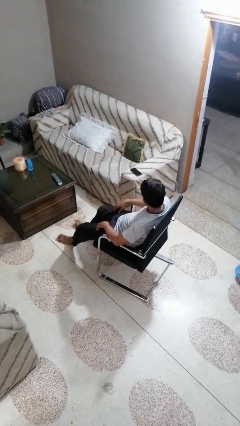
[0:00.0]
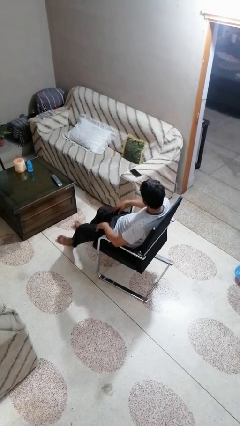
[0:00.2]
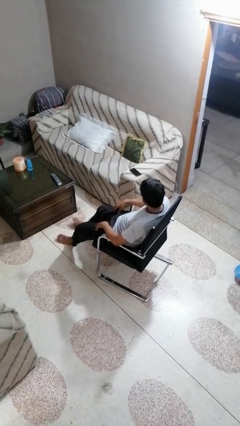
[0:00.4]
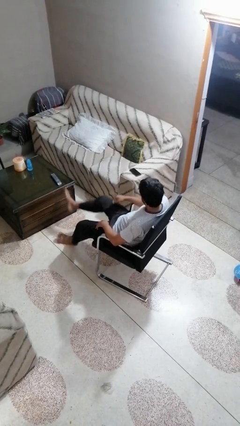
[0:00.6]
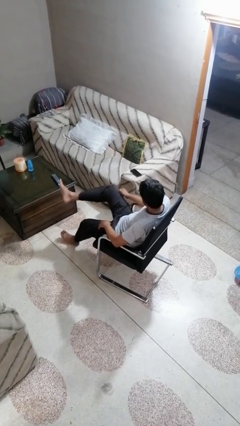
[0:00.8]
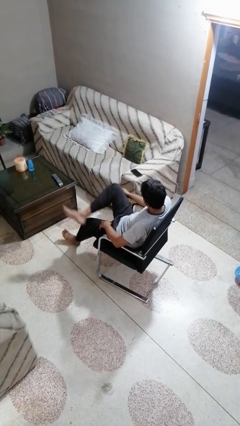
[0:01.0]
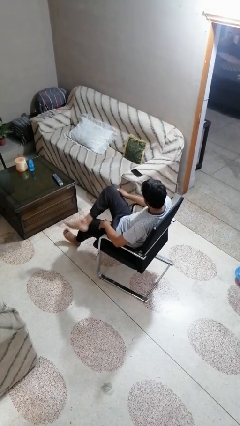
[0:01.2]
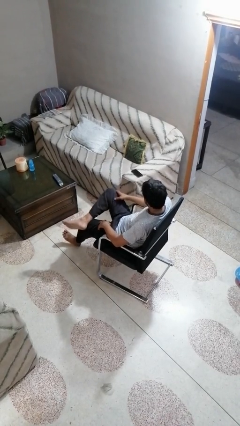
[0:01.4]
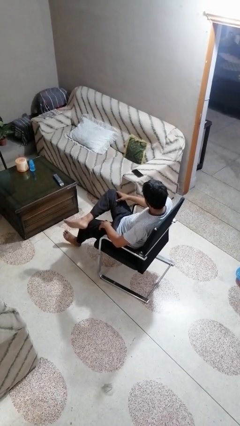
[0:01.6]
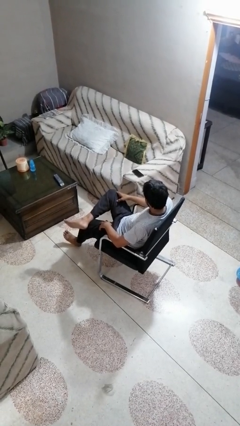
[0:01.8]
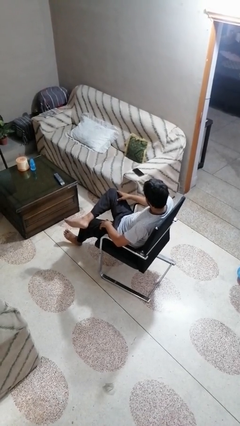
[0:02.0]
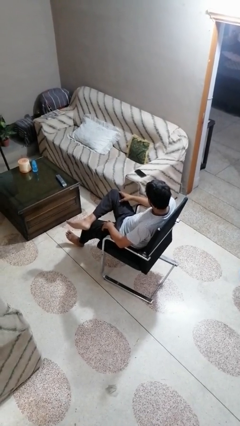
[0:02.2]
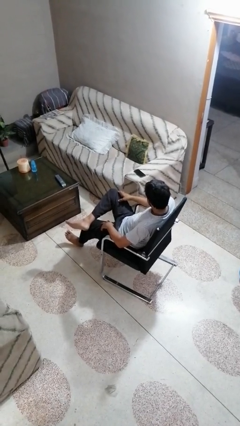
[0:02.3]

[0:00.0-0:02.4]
person crosses legs

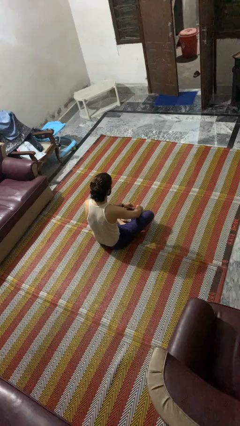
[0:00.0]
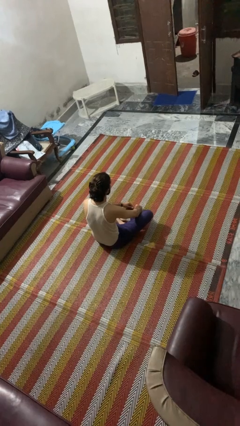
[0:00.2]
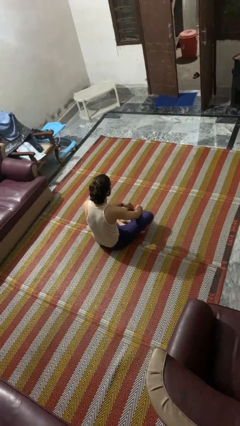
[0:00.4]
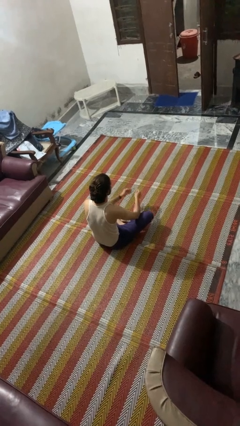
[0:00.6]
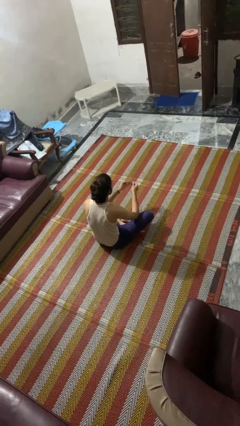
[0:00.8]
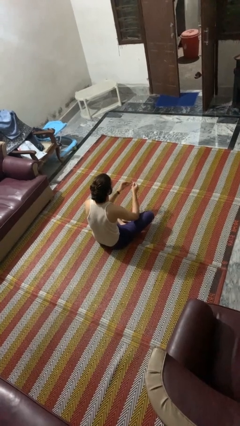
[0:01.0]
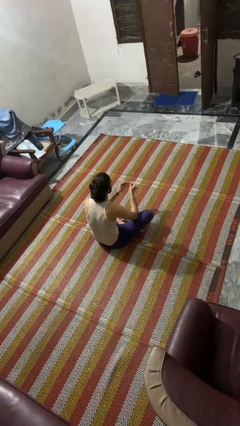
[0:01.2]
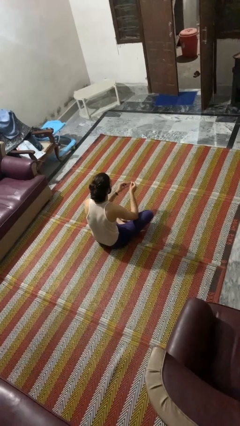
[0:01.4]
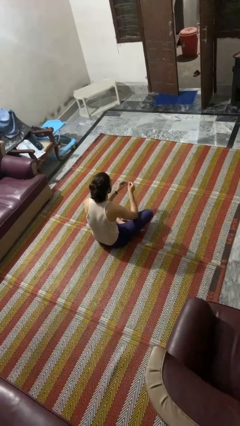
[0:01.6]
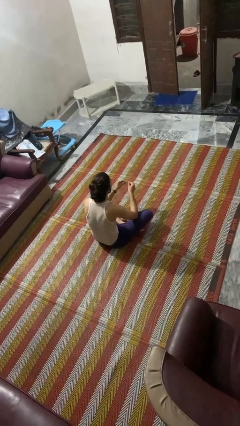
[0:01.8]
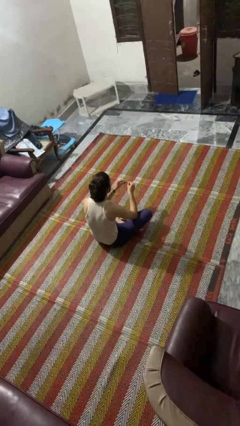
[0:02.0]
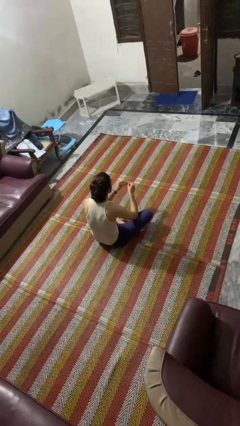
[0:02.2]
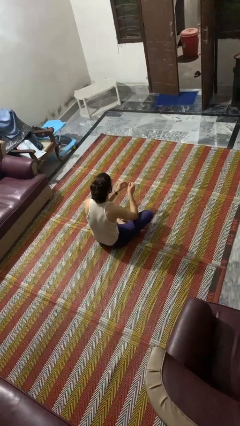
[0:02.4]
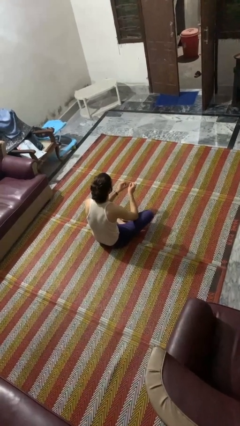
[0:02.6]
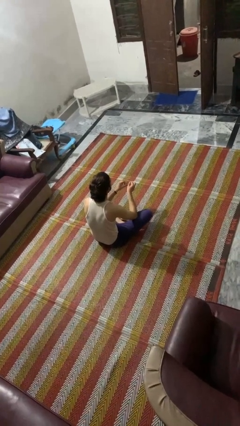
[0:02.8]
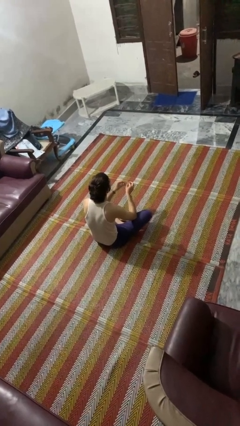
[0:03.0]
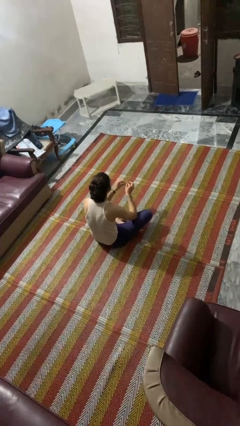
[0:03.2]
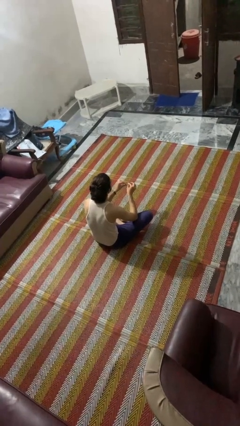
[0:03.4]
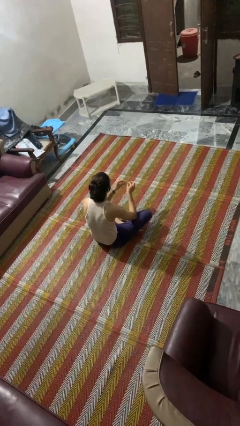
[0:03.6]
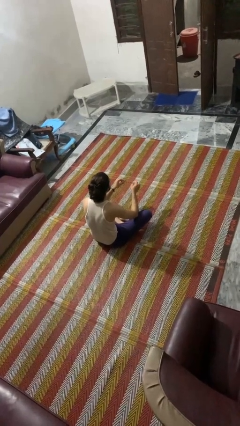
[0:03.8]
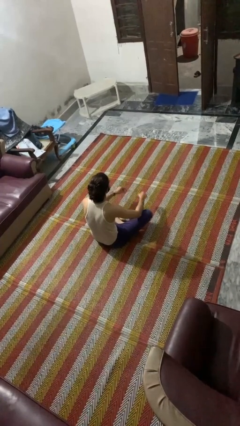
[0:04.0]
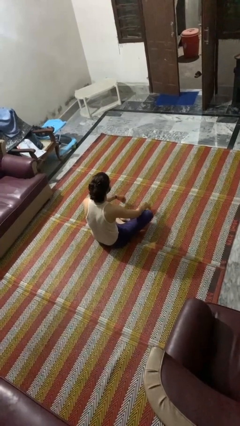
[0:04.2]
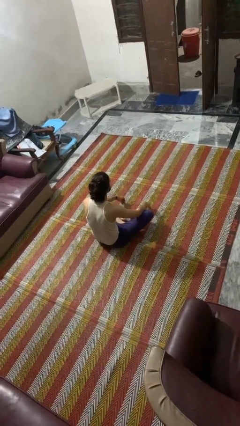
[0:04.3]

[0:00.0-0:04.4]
person files fingernails

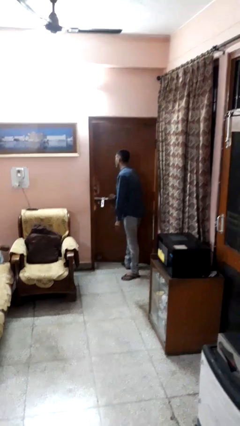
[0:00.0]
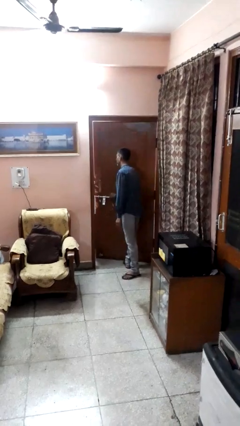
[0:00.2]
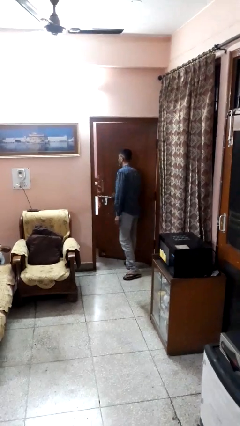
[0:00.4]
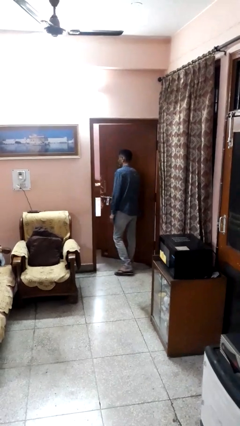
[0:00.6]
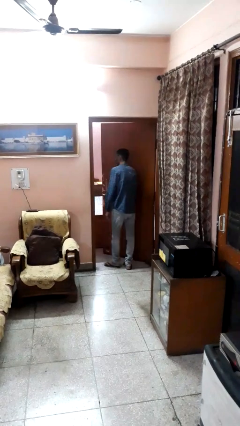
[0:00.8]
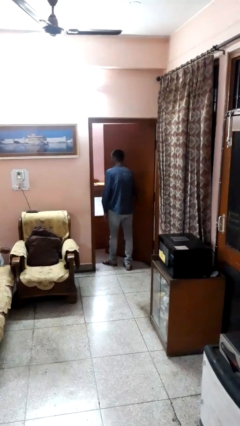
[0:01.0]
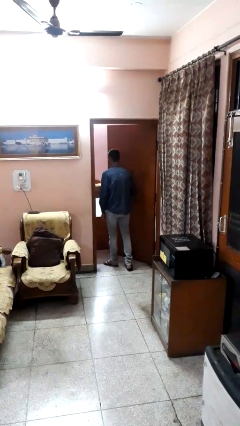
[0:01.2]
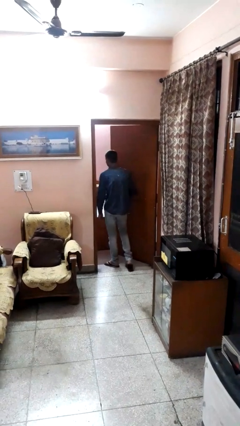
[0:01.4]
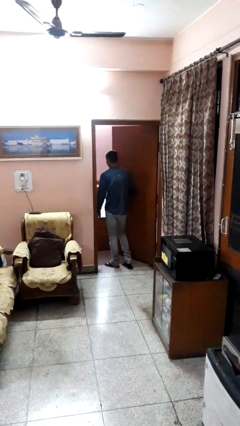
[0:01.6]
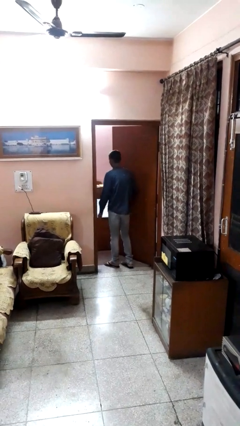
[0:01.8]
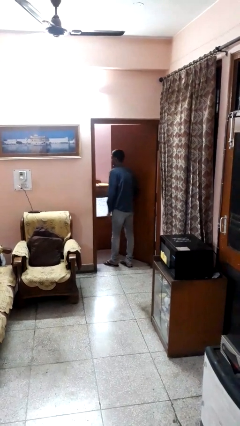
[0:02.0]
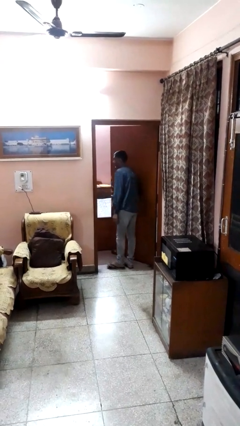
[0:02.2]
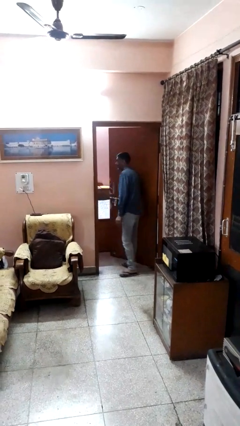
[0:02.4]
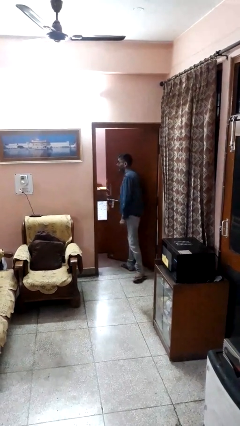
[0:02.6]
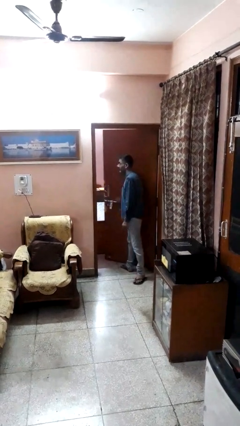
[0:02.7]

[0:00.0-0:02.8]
person opens facility door

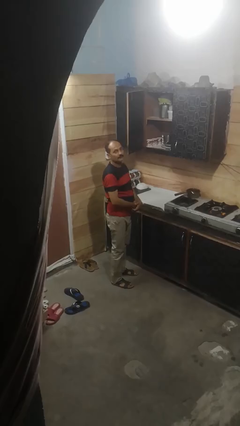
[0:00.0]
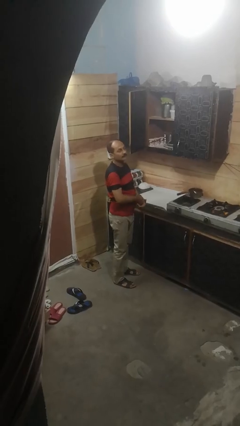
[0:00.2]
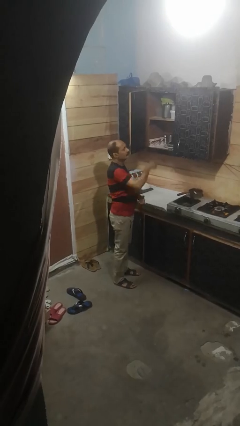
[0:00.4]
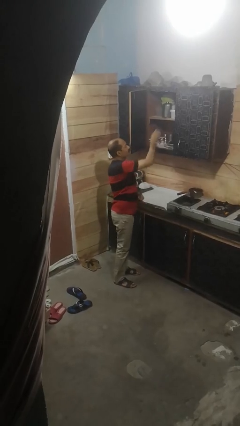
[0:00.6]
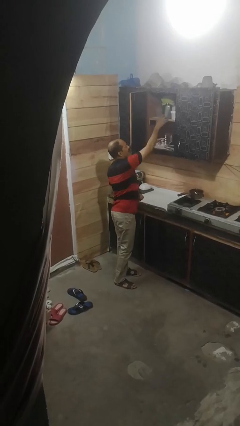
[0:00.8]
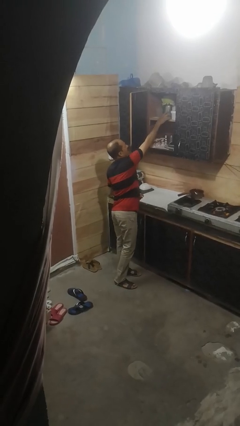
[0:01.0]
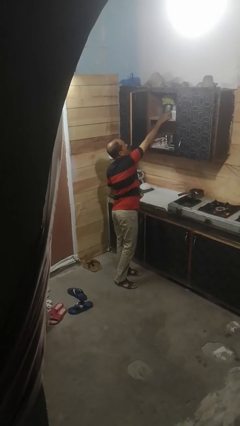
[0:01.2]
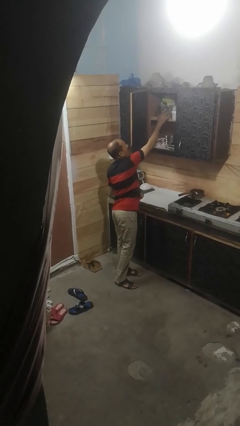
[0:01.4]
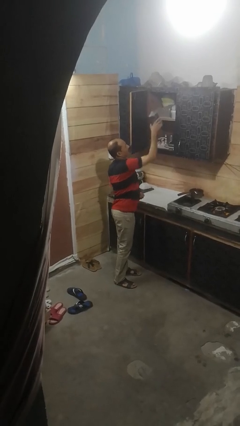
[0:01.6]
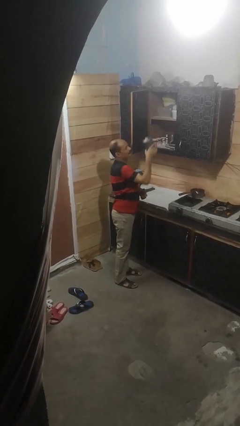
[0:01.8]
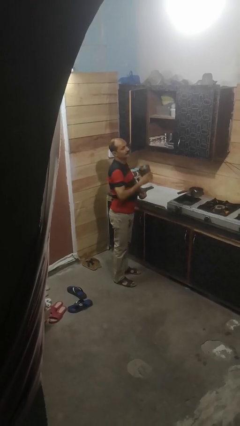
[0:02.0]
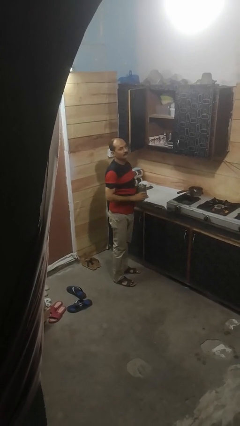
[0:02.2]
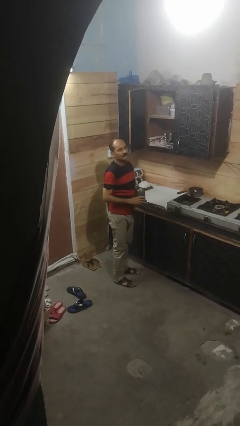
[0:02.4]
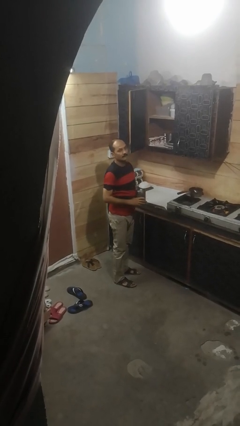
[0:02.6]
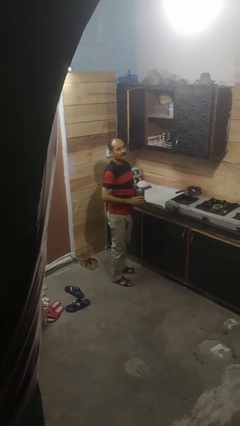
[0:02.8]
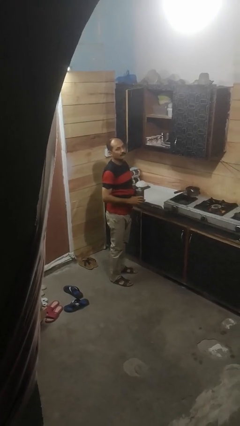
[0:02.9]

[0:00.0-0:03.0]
person picks up object from cabinet

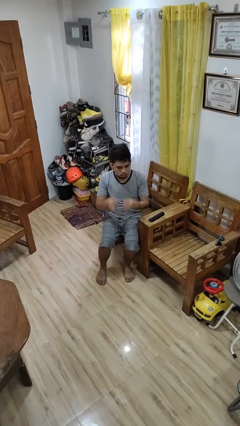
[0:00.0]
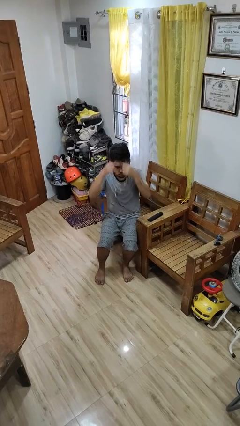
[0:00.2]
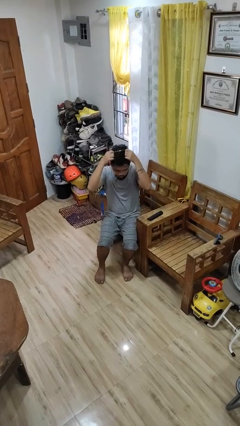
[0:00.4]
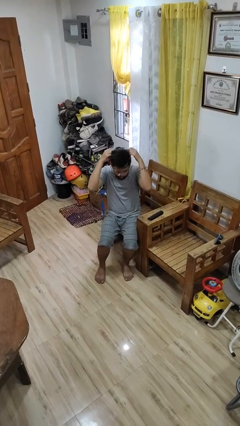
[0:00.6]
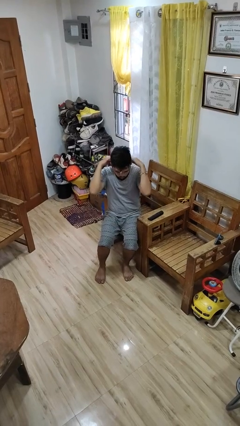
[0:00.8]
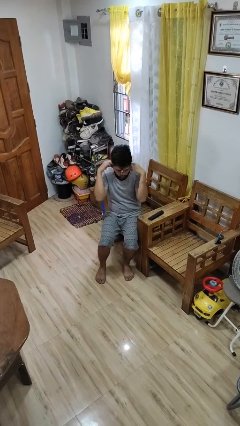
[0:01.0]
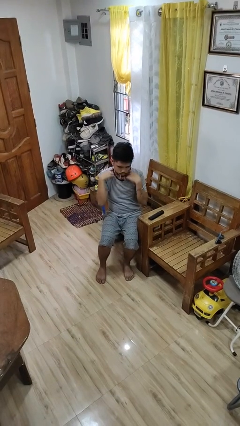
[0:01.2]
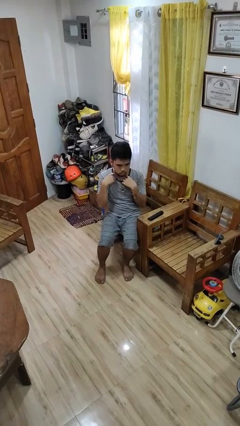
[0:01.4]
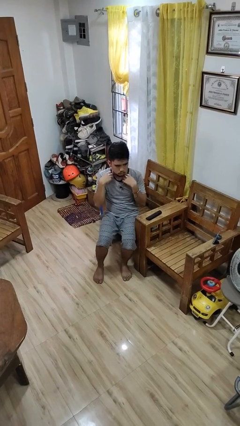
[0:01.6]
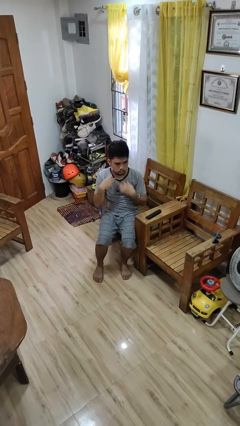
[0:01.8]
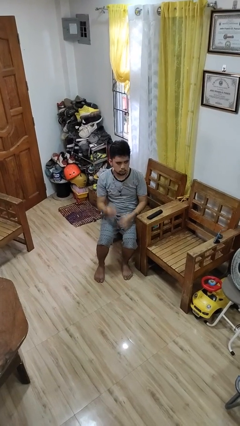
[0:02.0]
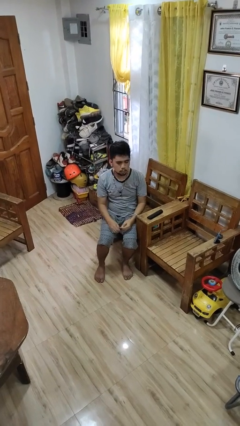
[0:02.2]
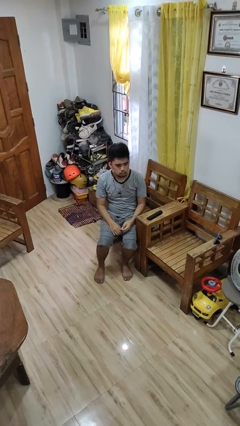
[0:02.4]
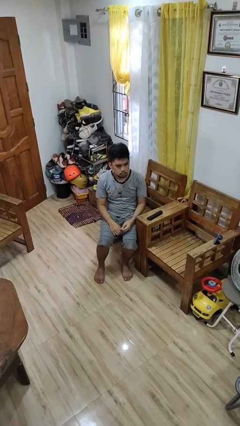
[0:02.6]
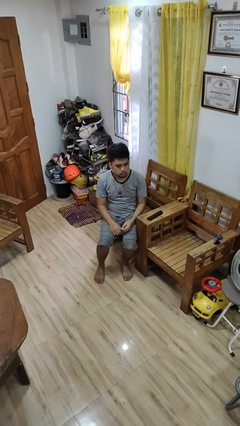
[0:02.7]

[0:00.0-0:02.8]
person puts on necklace

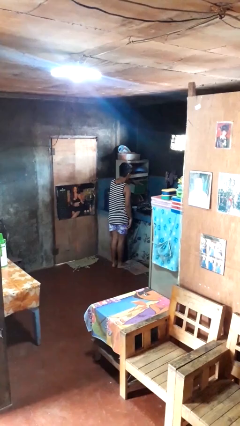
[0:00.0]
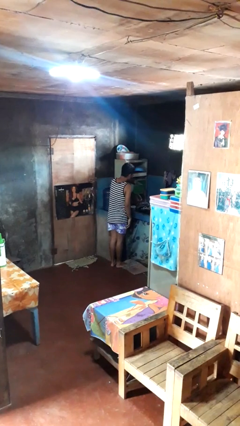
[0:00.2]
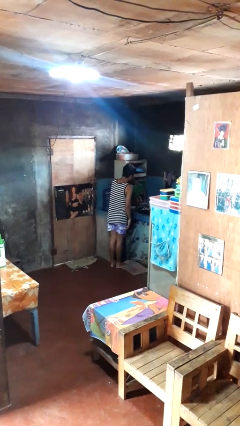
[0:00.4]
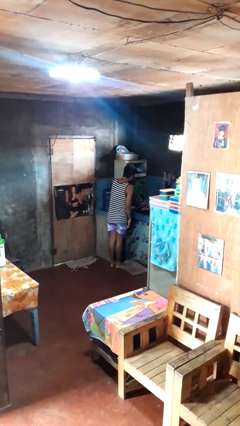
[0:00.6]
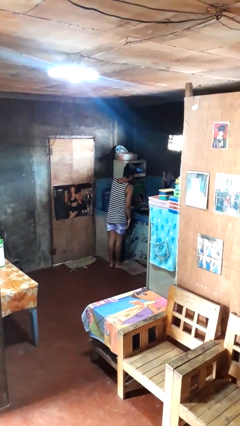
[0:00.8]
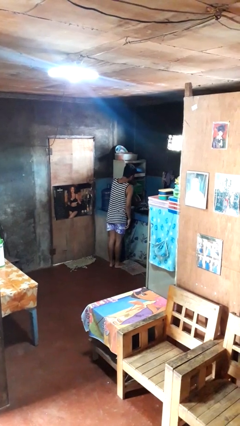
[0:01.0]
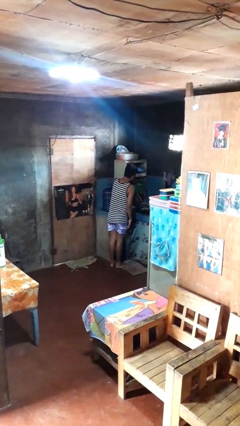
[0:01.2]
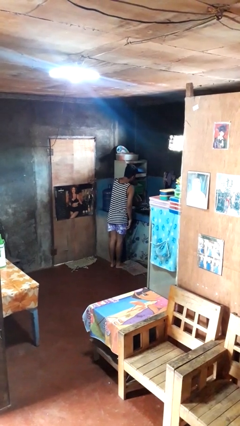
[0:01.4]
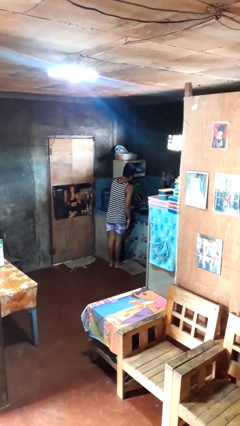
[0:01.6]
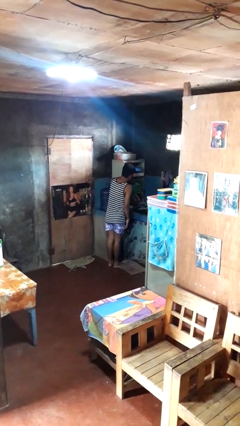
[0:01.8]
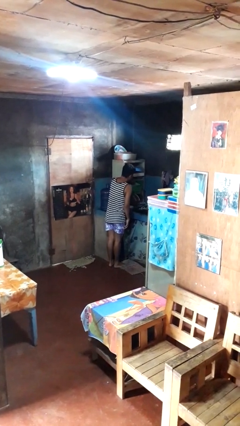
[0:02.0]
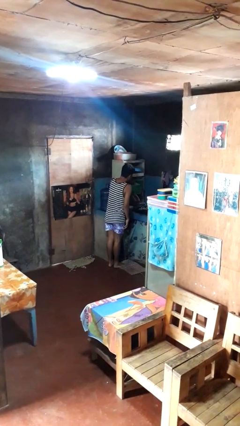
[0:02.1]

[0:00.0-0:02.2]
person searches in kitchen drawer
